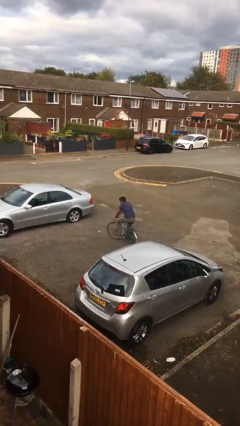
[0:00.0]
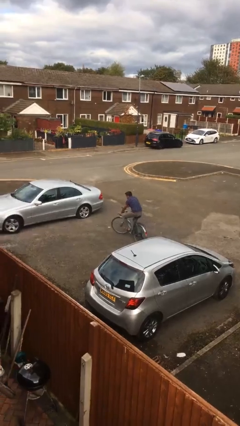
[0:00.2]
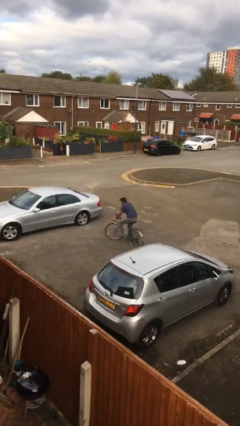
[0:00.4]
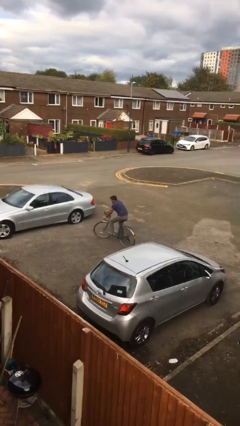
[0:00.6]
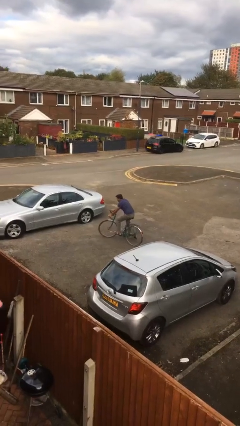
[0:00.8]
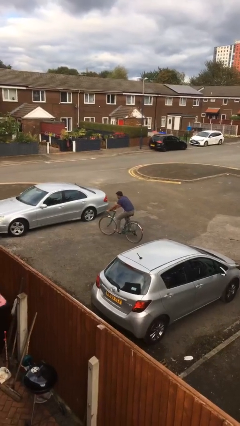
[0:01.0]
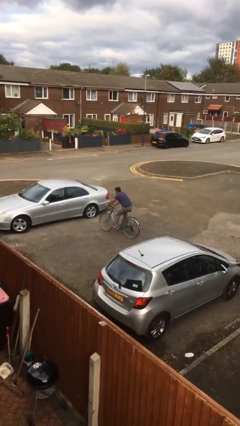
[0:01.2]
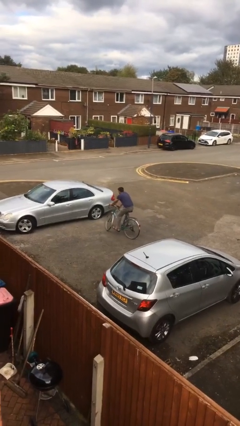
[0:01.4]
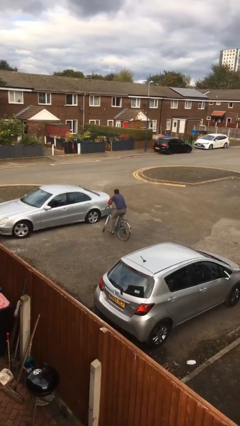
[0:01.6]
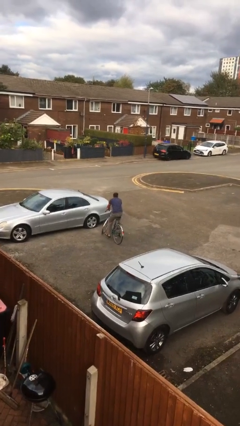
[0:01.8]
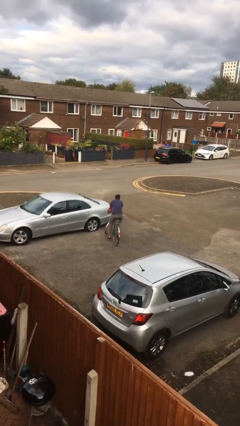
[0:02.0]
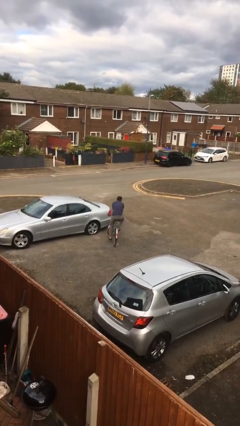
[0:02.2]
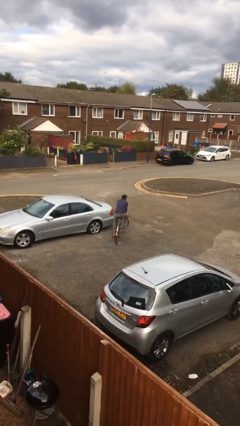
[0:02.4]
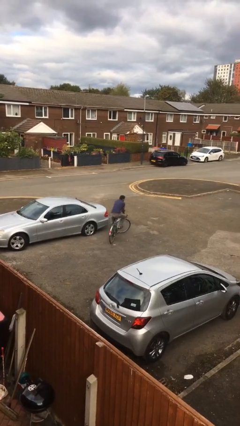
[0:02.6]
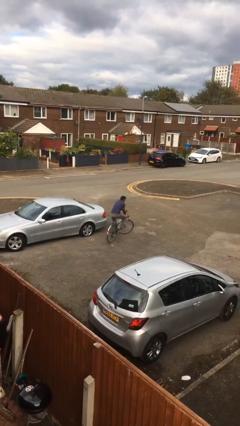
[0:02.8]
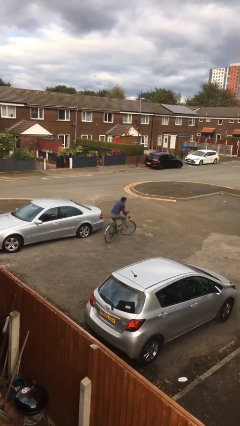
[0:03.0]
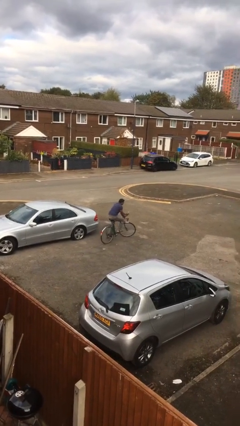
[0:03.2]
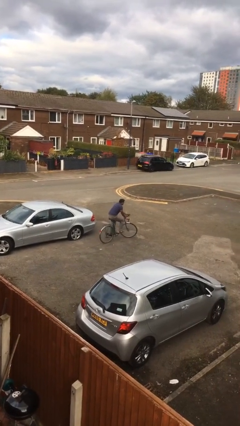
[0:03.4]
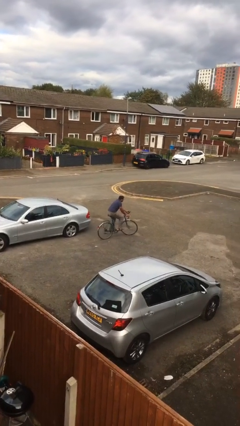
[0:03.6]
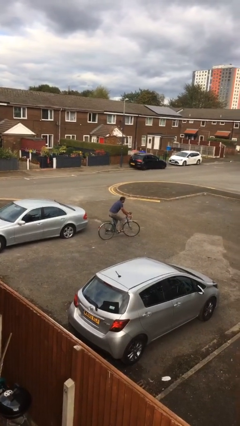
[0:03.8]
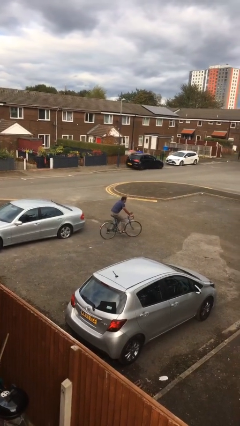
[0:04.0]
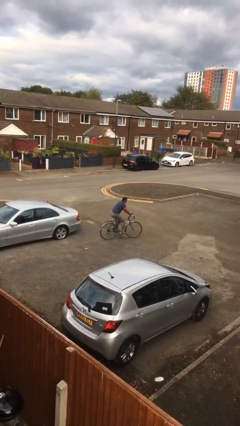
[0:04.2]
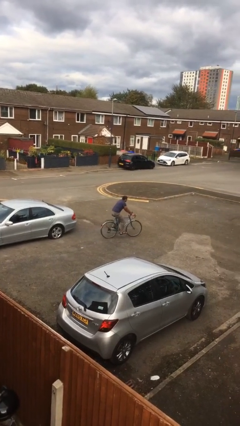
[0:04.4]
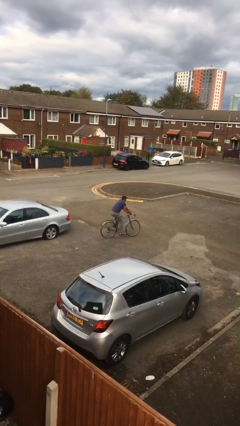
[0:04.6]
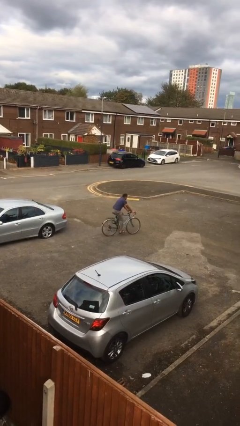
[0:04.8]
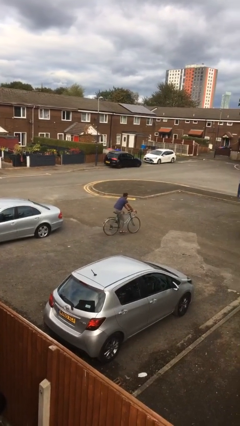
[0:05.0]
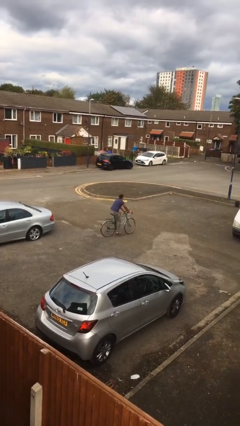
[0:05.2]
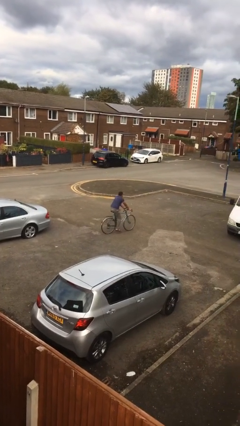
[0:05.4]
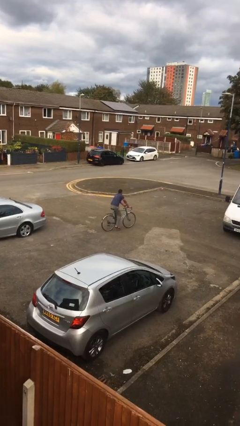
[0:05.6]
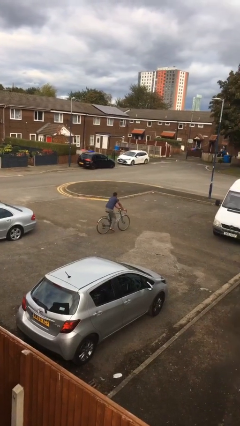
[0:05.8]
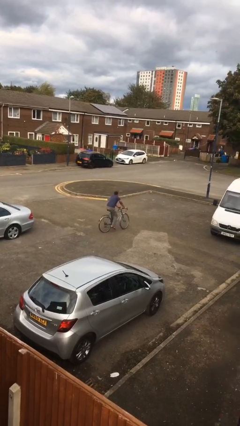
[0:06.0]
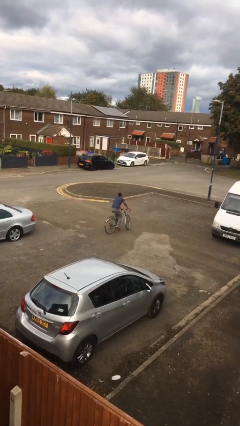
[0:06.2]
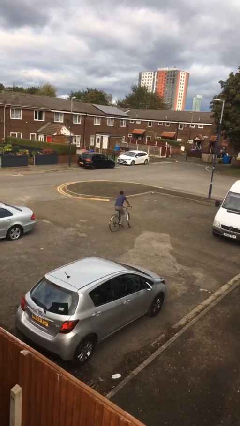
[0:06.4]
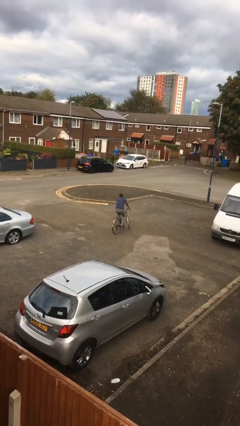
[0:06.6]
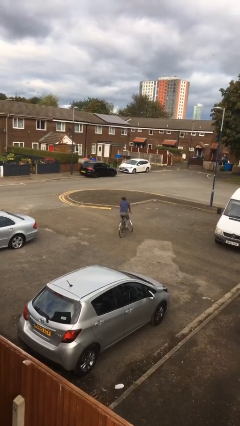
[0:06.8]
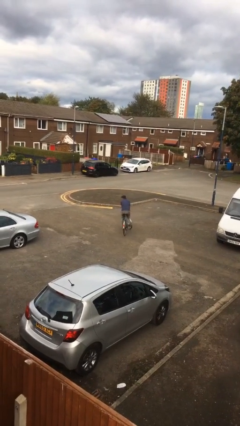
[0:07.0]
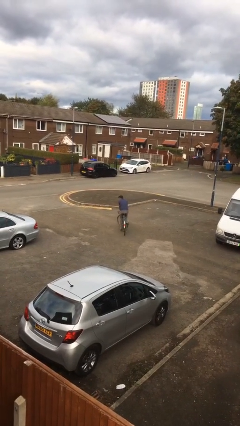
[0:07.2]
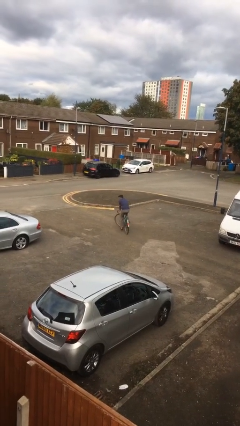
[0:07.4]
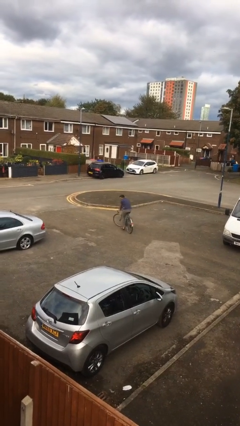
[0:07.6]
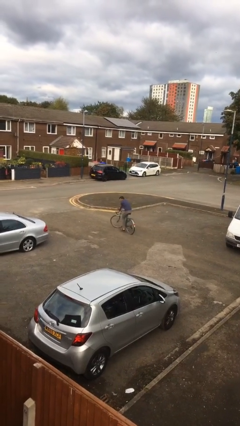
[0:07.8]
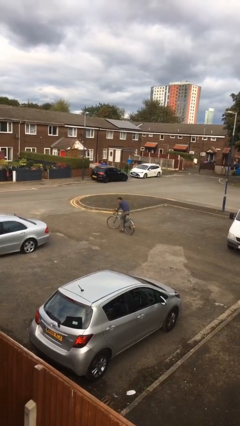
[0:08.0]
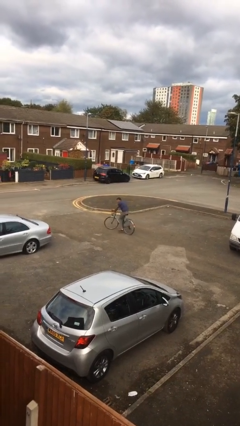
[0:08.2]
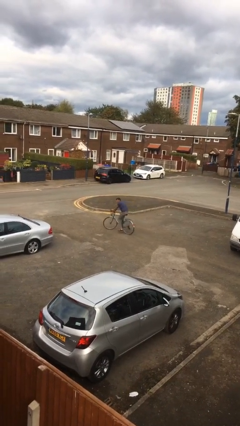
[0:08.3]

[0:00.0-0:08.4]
person rides bicycle

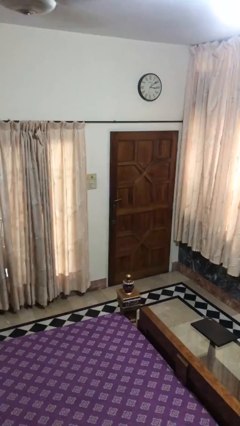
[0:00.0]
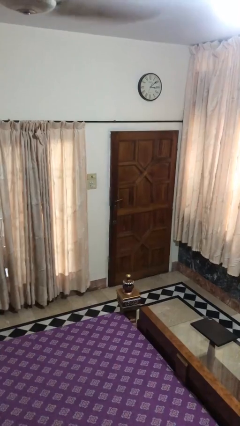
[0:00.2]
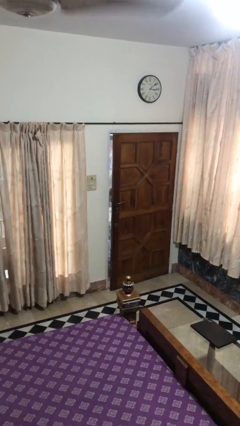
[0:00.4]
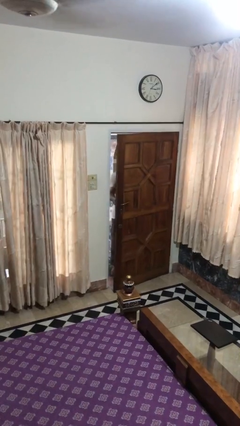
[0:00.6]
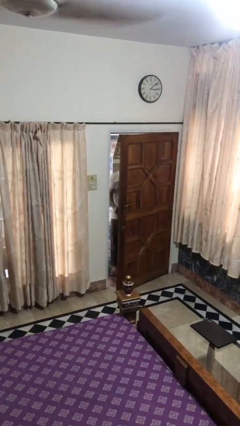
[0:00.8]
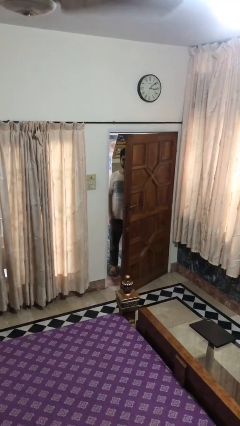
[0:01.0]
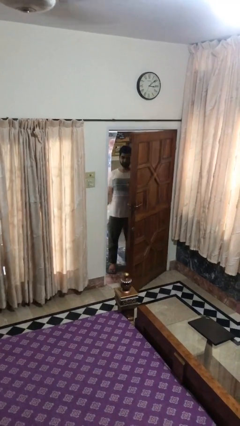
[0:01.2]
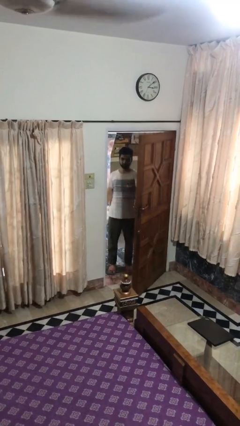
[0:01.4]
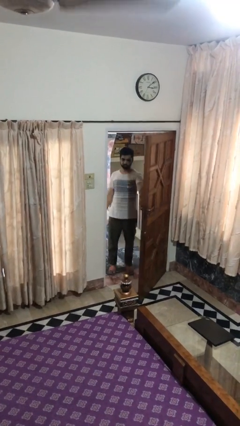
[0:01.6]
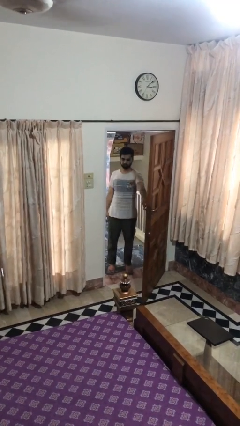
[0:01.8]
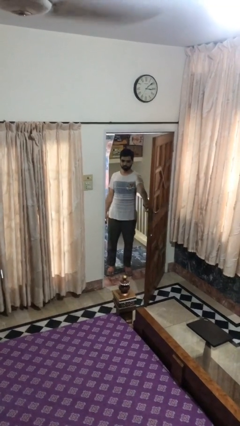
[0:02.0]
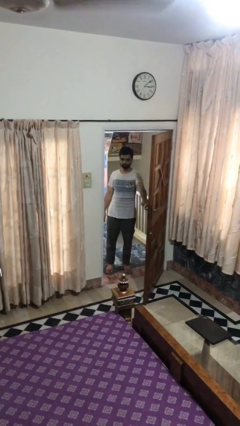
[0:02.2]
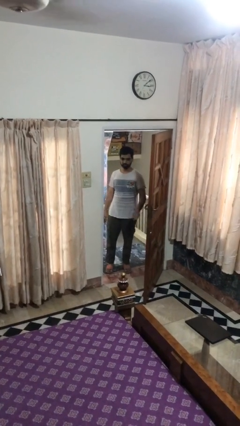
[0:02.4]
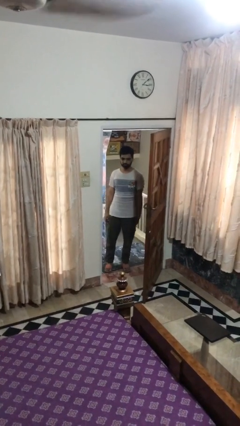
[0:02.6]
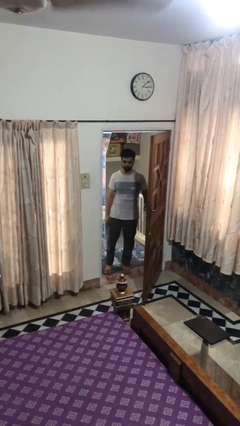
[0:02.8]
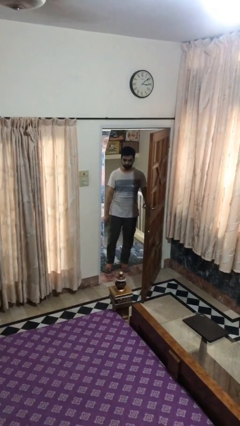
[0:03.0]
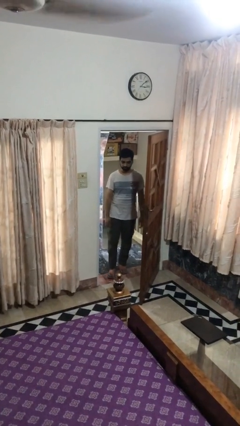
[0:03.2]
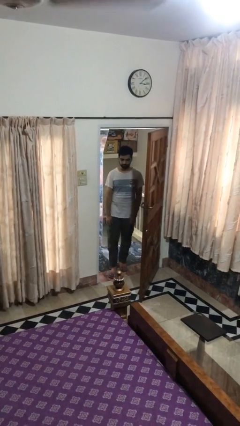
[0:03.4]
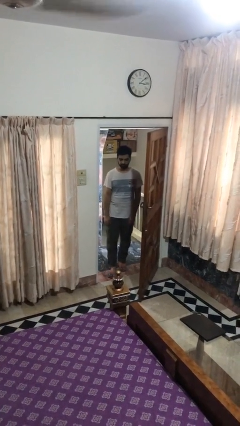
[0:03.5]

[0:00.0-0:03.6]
person opens facility door

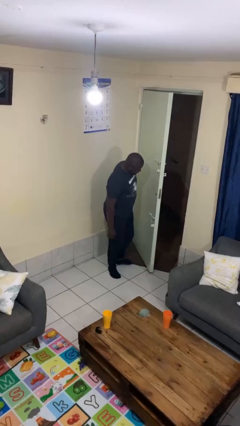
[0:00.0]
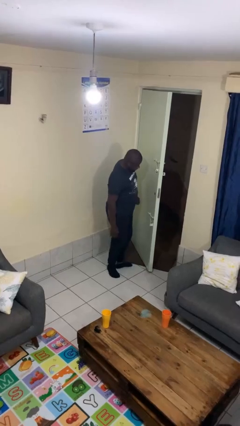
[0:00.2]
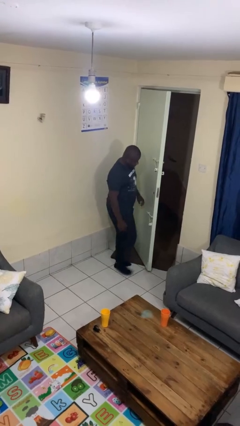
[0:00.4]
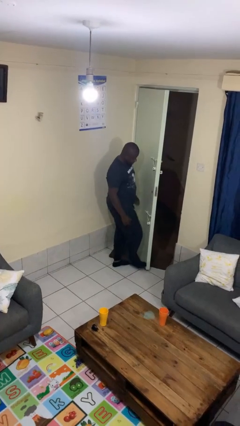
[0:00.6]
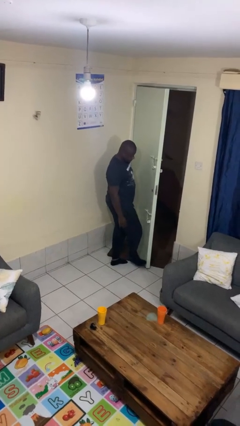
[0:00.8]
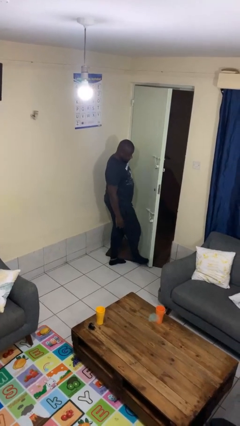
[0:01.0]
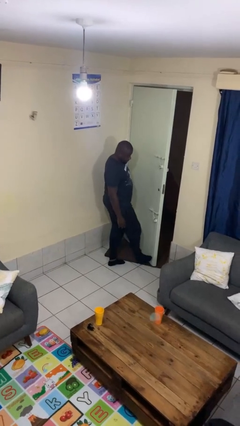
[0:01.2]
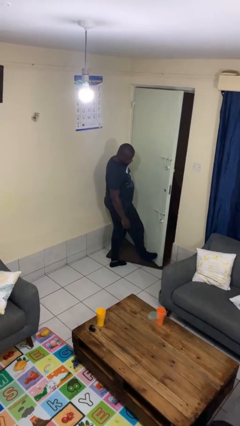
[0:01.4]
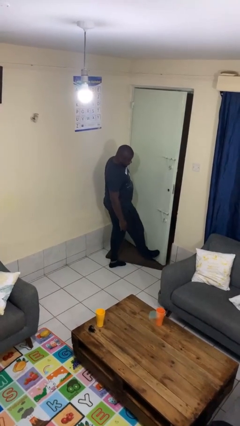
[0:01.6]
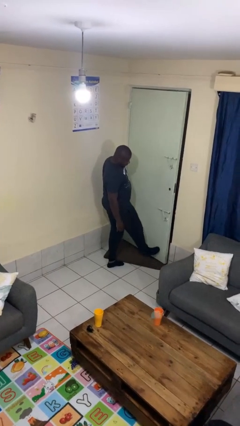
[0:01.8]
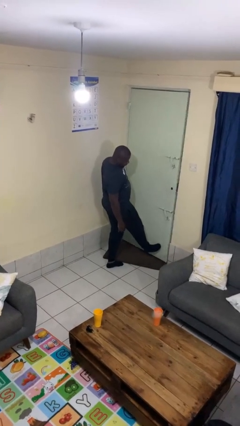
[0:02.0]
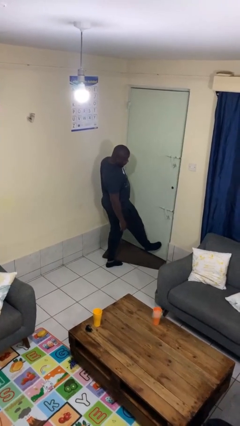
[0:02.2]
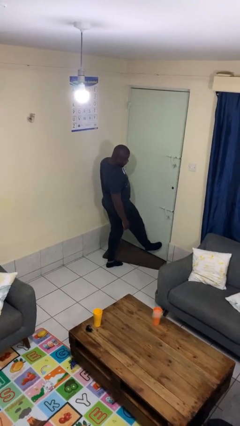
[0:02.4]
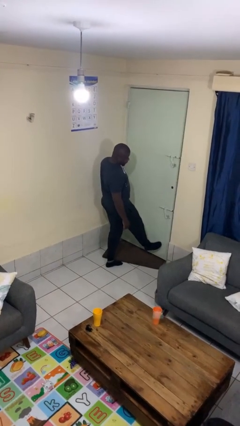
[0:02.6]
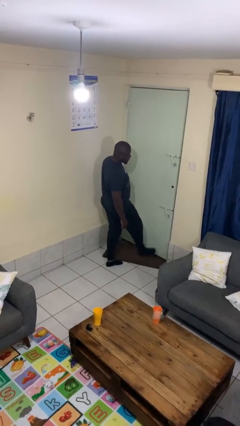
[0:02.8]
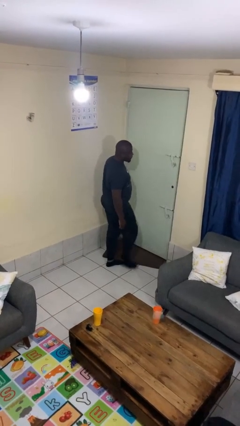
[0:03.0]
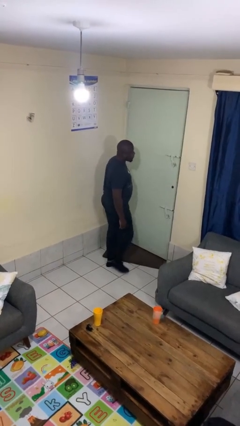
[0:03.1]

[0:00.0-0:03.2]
person closes door with foot

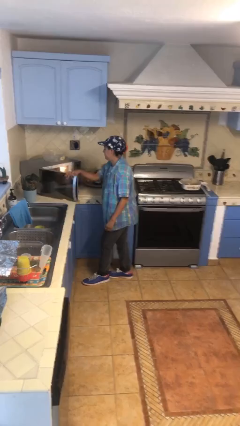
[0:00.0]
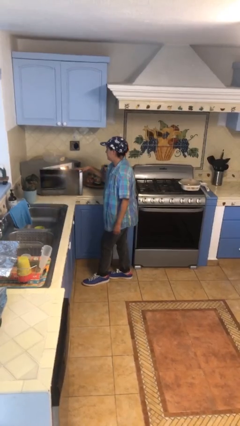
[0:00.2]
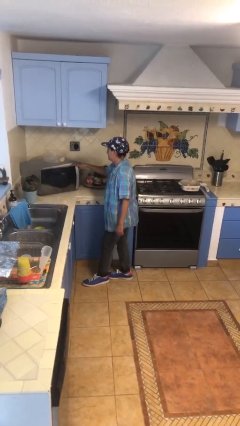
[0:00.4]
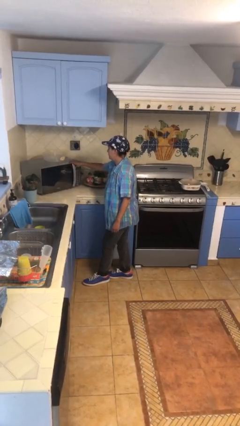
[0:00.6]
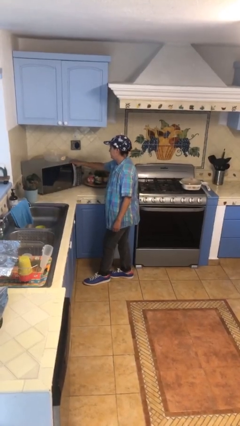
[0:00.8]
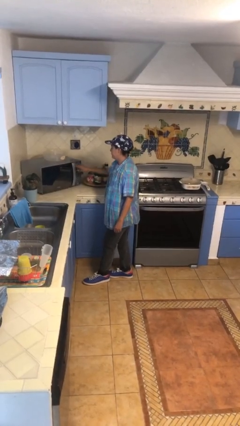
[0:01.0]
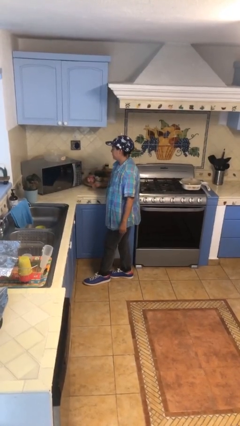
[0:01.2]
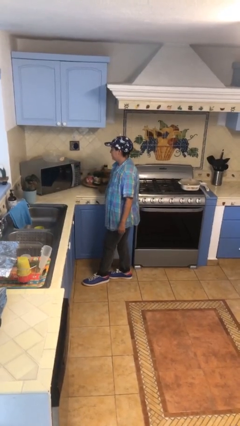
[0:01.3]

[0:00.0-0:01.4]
person closes microwave

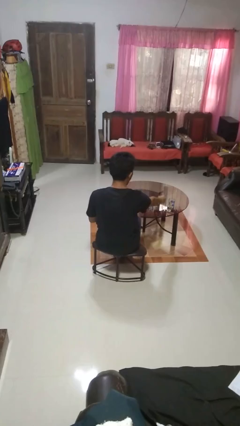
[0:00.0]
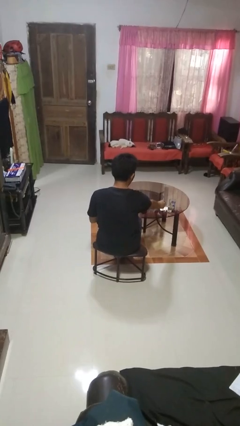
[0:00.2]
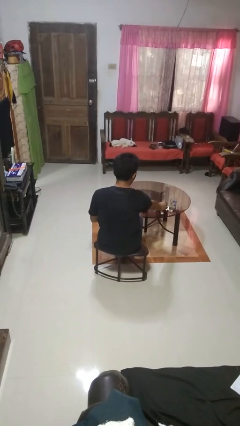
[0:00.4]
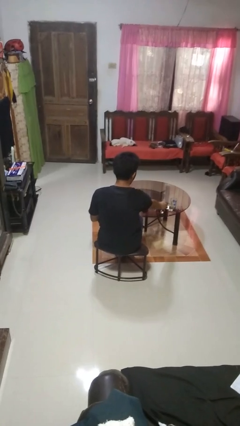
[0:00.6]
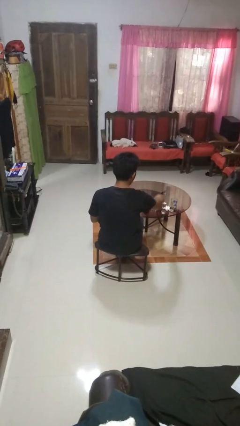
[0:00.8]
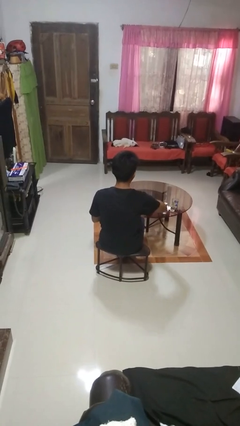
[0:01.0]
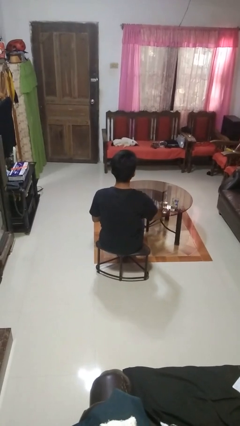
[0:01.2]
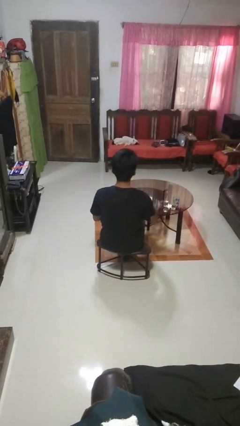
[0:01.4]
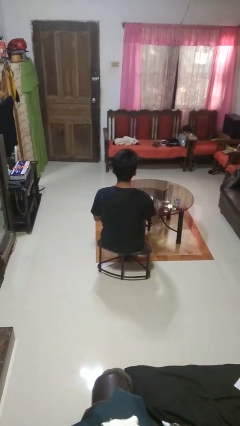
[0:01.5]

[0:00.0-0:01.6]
person puts down object on table
